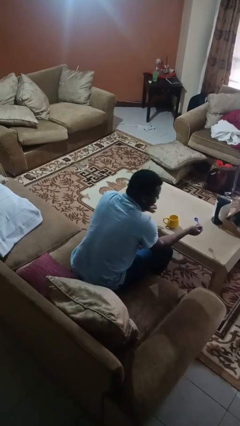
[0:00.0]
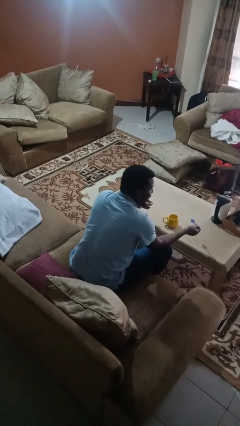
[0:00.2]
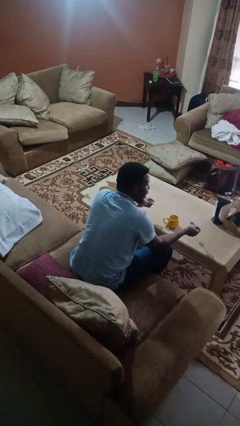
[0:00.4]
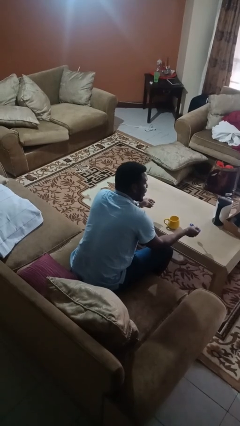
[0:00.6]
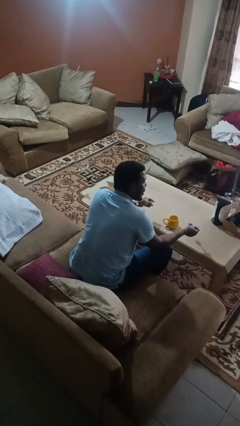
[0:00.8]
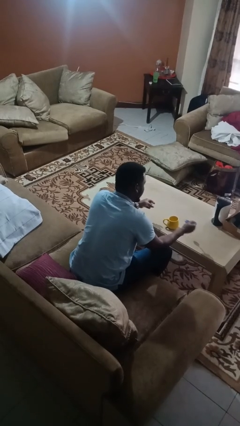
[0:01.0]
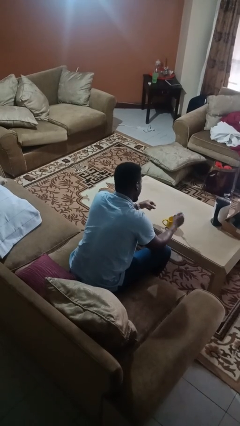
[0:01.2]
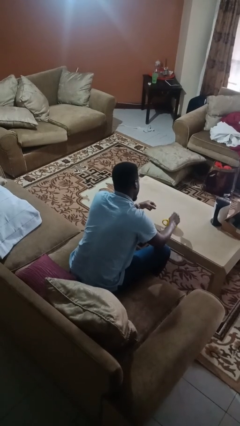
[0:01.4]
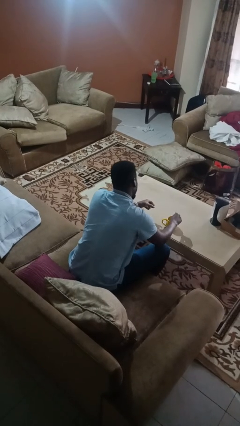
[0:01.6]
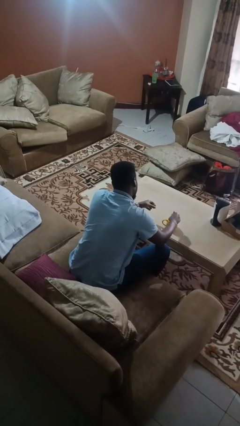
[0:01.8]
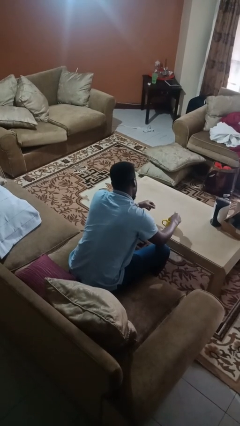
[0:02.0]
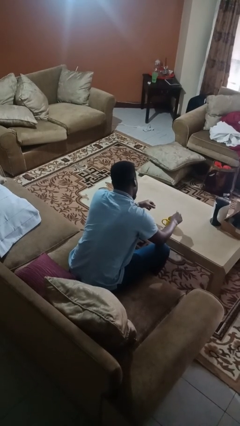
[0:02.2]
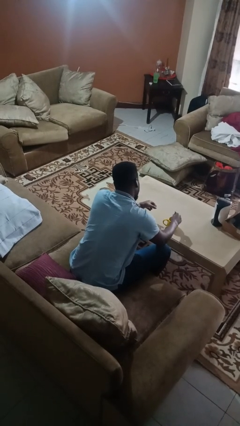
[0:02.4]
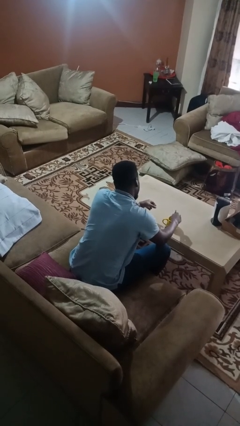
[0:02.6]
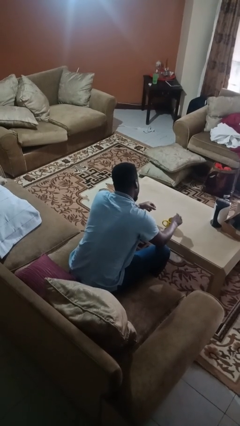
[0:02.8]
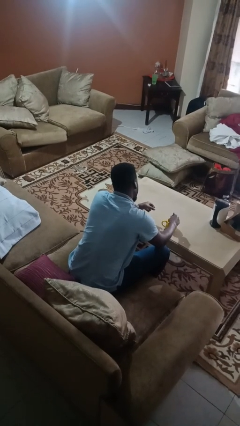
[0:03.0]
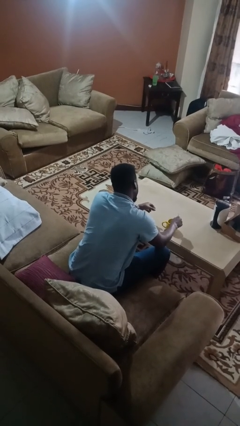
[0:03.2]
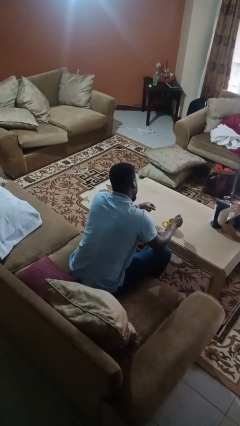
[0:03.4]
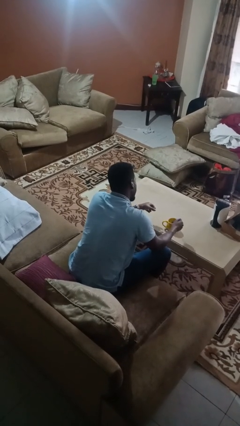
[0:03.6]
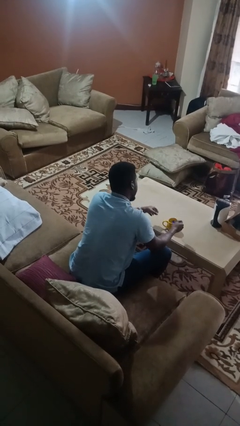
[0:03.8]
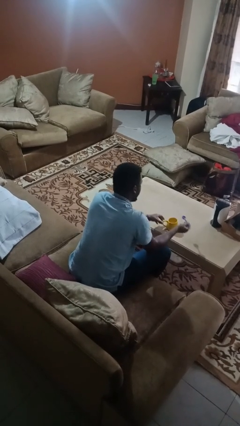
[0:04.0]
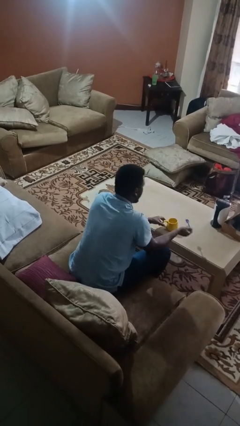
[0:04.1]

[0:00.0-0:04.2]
person stirs mug

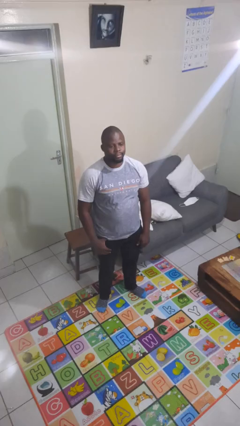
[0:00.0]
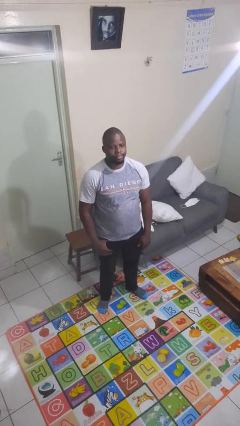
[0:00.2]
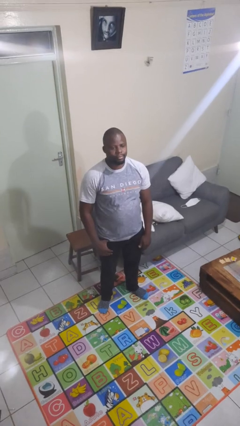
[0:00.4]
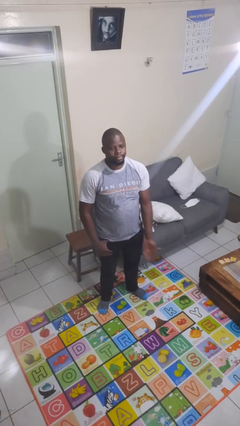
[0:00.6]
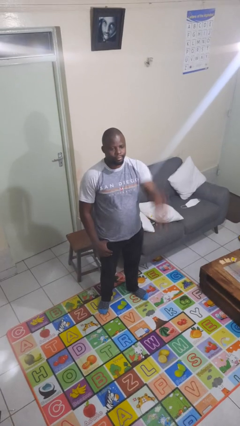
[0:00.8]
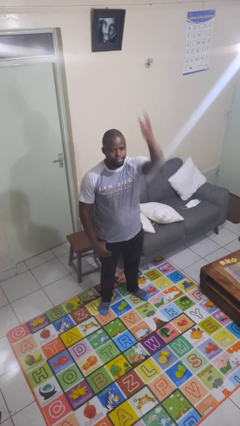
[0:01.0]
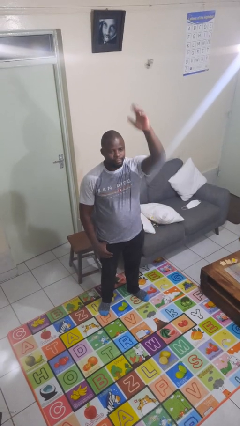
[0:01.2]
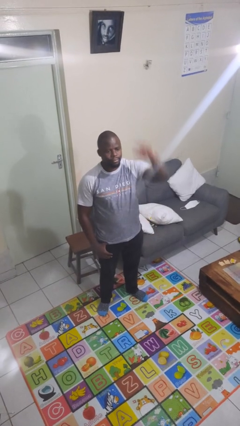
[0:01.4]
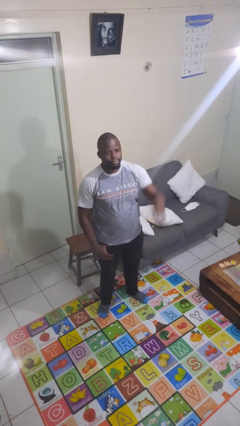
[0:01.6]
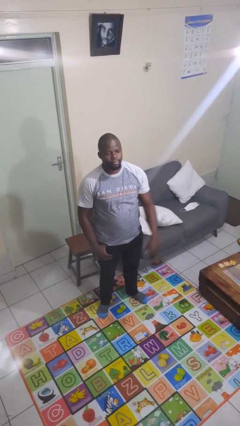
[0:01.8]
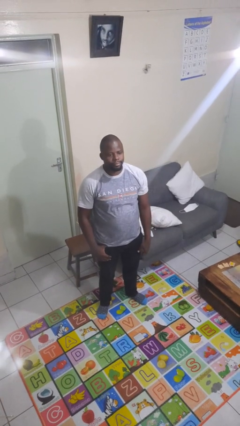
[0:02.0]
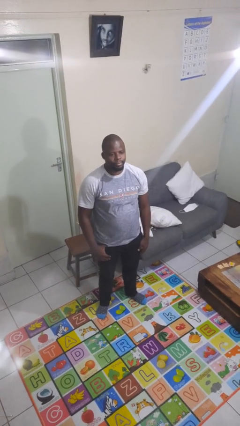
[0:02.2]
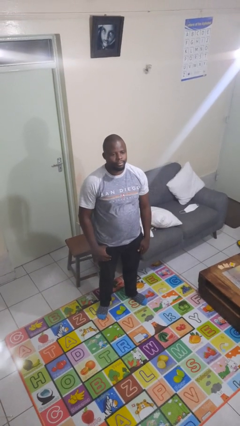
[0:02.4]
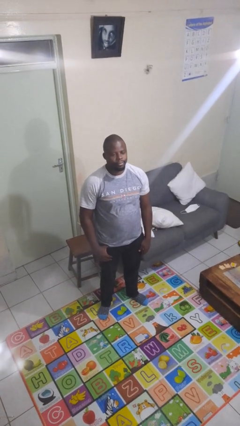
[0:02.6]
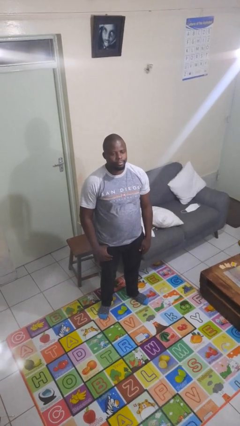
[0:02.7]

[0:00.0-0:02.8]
person gestures swipe up

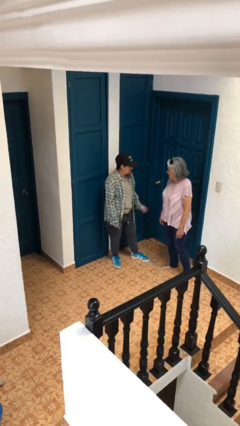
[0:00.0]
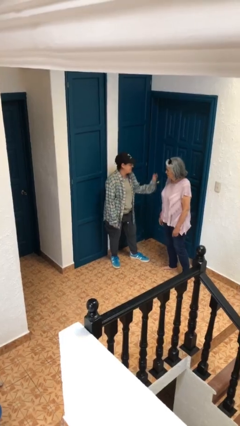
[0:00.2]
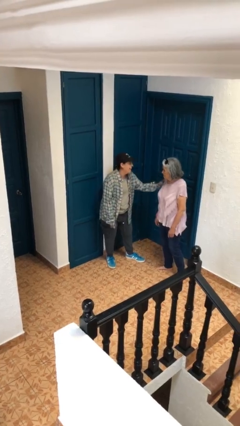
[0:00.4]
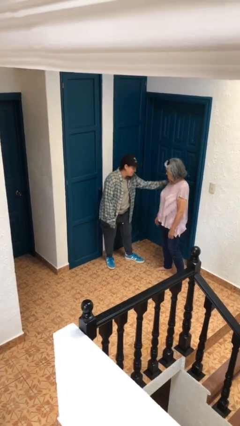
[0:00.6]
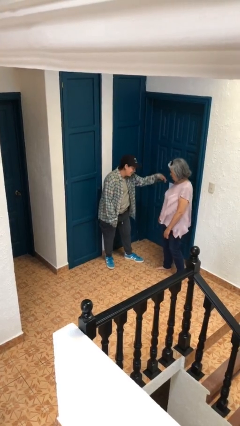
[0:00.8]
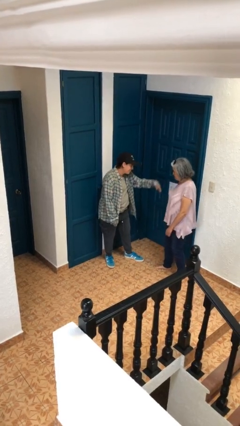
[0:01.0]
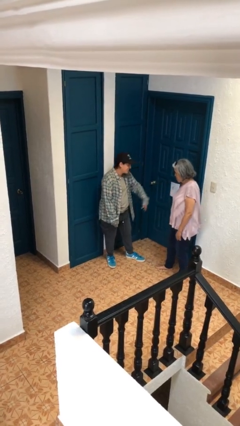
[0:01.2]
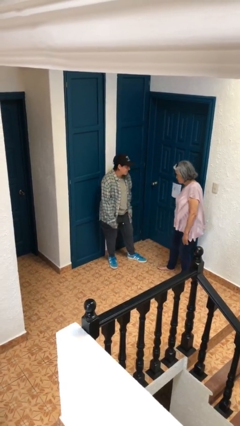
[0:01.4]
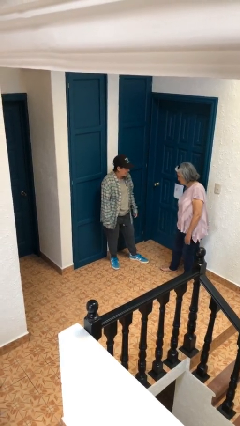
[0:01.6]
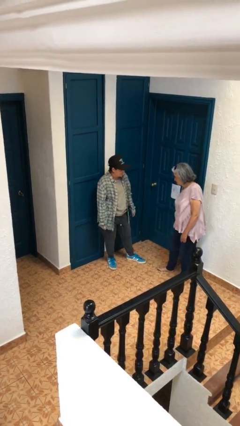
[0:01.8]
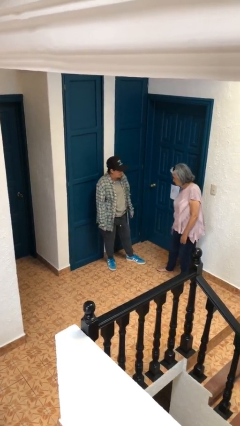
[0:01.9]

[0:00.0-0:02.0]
person shoves person

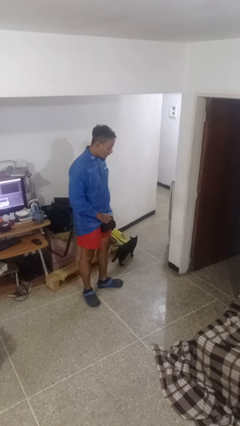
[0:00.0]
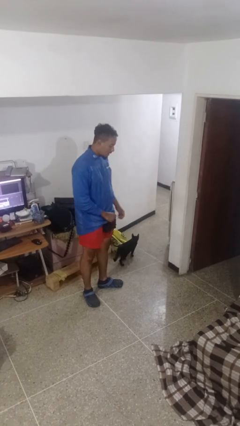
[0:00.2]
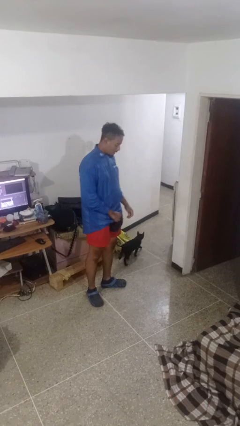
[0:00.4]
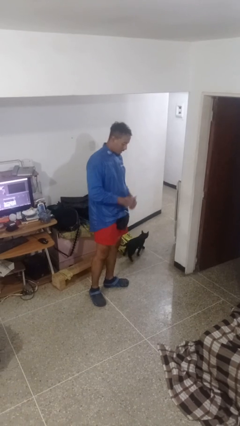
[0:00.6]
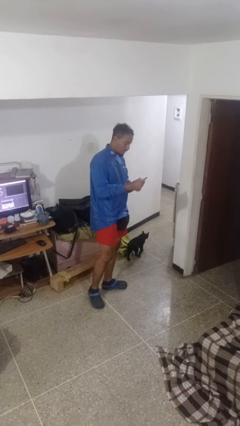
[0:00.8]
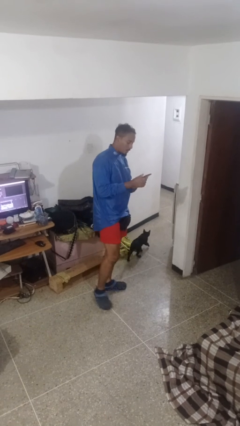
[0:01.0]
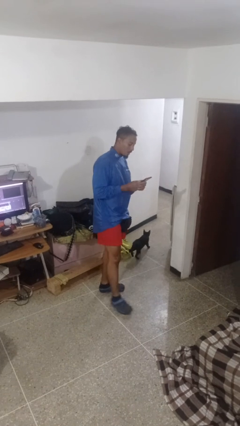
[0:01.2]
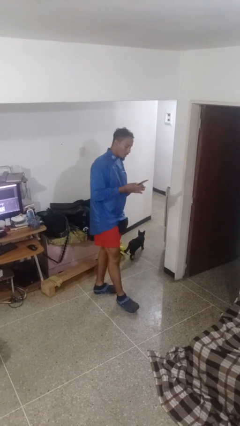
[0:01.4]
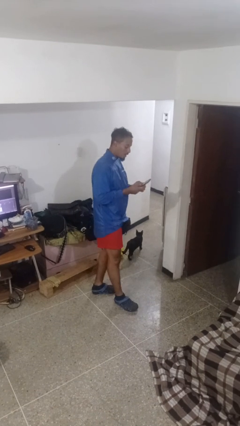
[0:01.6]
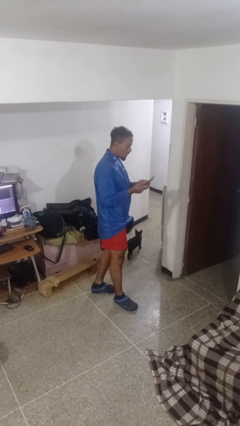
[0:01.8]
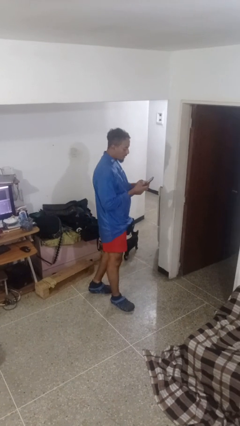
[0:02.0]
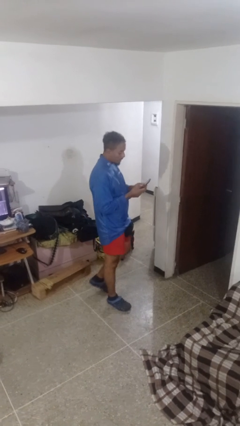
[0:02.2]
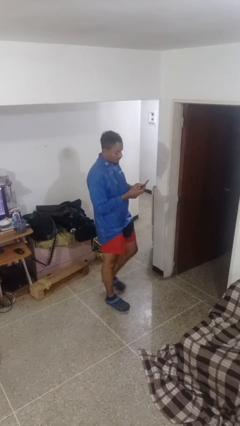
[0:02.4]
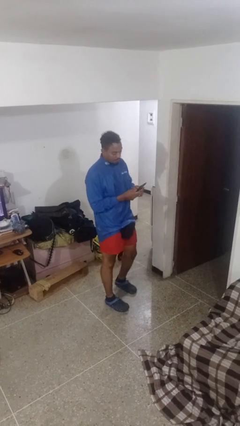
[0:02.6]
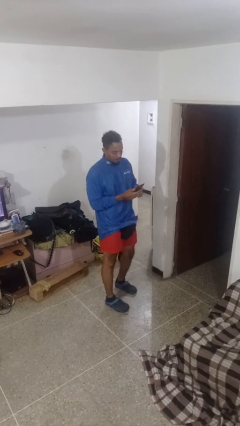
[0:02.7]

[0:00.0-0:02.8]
person takes phone from pocket

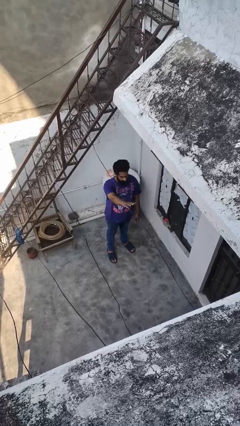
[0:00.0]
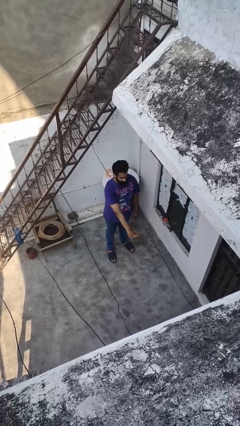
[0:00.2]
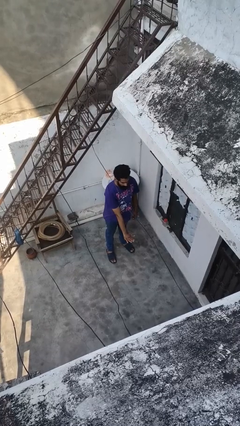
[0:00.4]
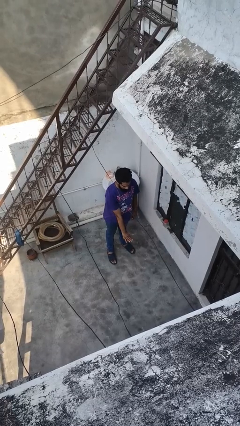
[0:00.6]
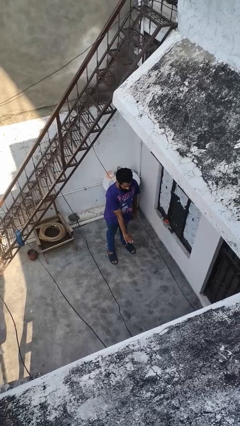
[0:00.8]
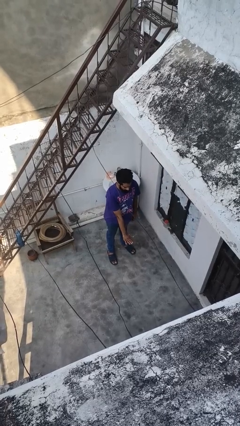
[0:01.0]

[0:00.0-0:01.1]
person gestures swipe down

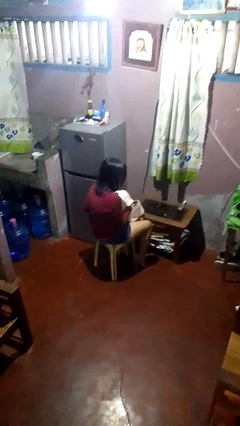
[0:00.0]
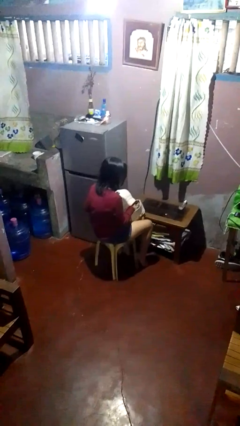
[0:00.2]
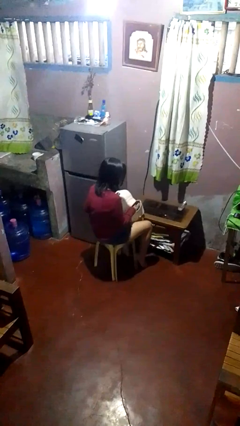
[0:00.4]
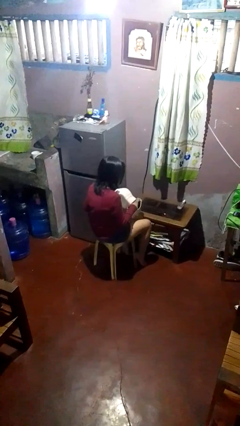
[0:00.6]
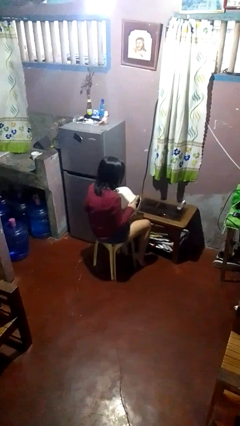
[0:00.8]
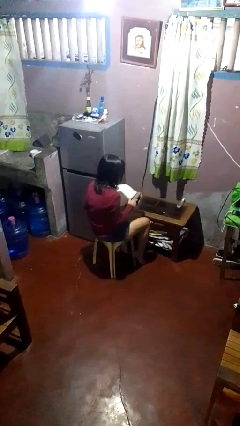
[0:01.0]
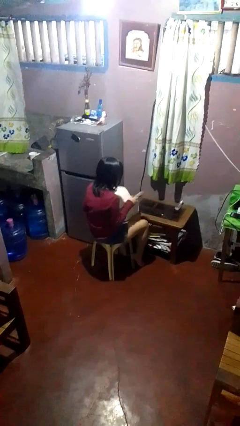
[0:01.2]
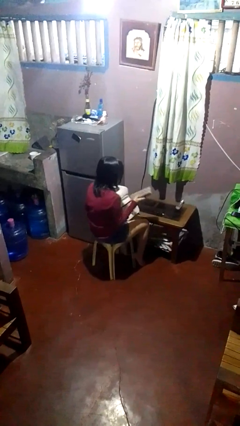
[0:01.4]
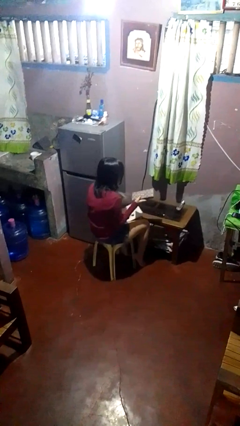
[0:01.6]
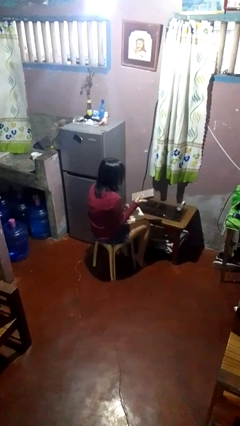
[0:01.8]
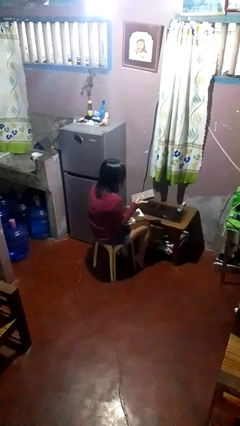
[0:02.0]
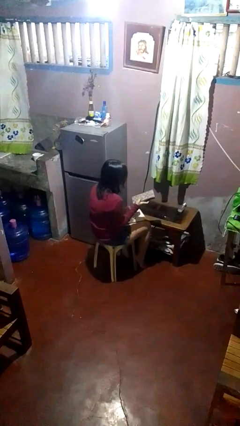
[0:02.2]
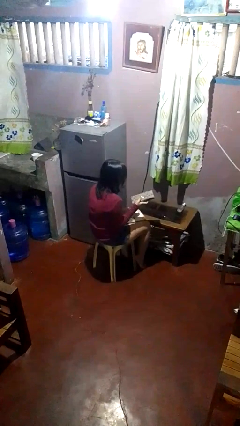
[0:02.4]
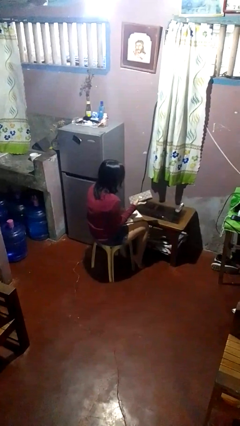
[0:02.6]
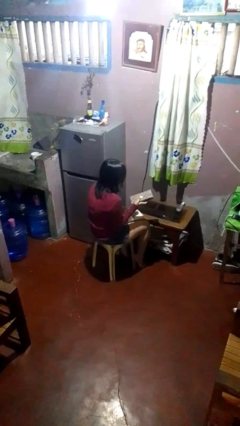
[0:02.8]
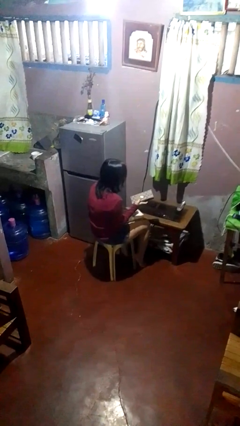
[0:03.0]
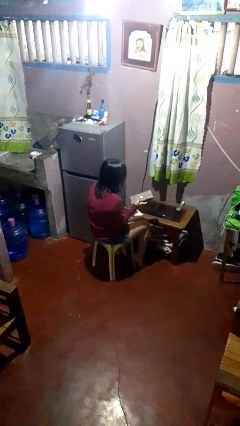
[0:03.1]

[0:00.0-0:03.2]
person takes object from purse

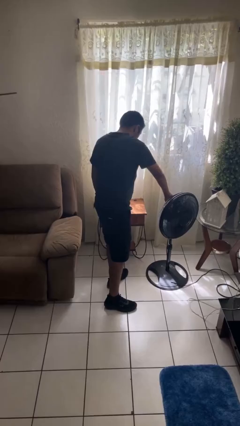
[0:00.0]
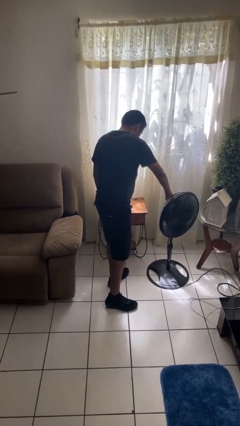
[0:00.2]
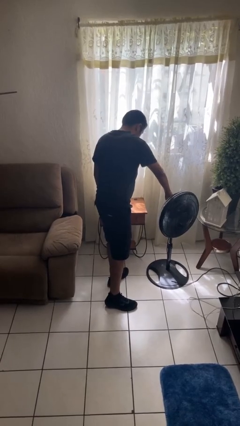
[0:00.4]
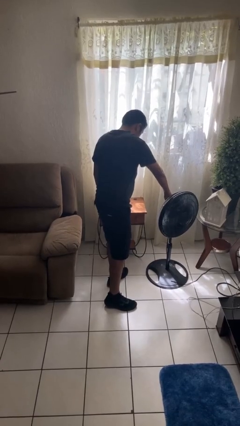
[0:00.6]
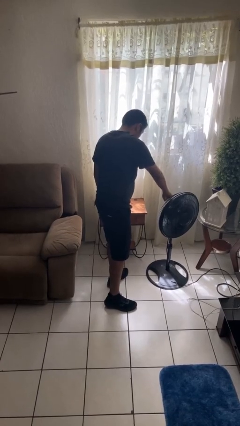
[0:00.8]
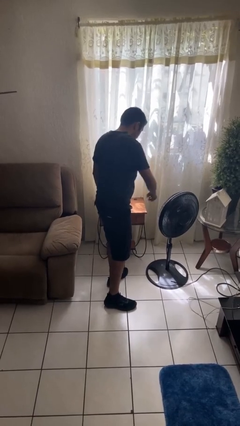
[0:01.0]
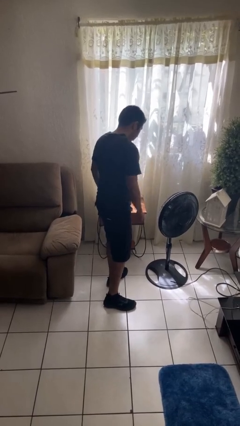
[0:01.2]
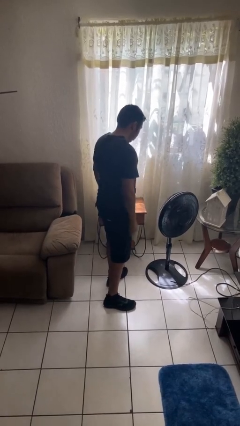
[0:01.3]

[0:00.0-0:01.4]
person turns on fan
